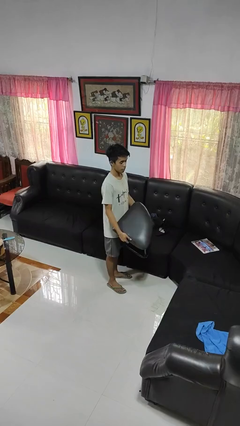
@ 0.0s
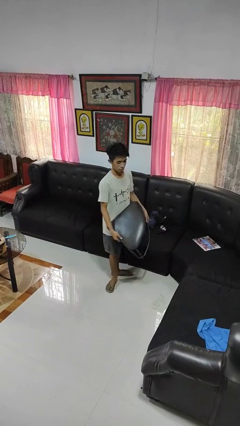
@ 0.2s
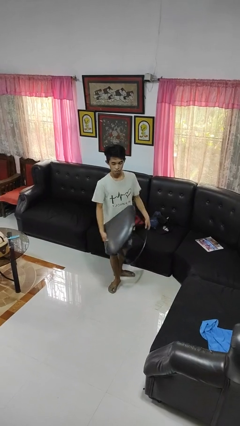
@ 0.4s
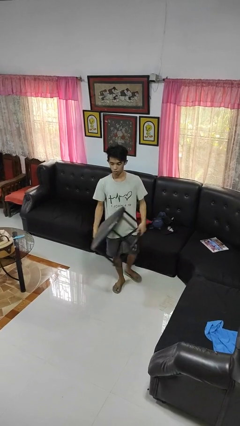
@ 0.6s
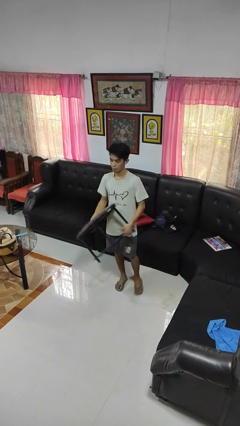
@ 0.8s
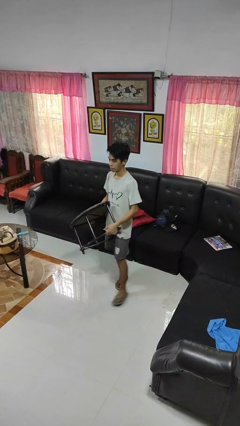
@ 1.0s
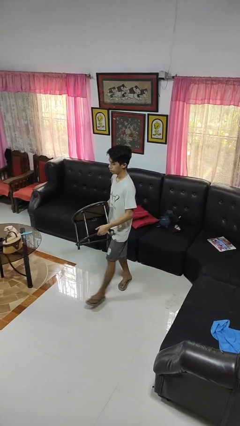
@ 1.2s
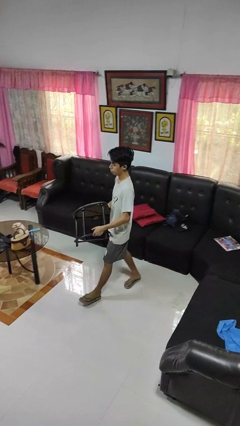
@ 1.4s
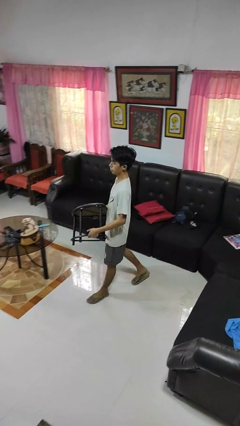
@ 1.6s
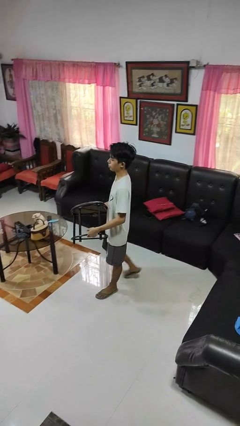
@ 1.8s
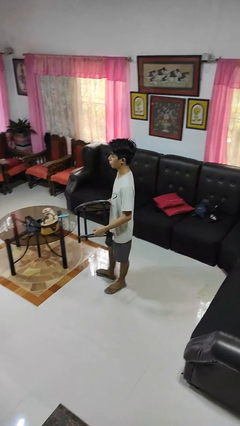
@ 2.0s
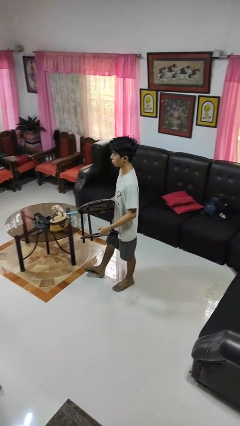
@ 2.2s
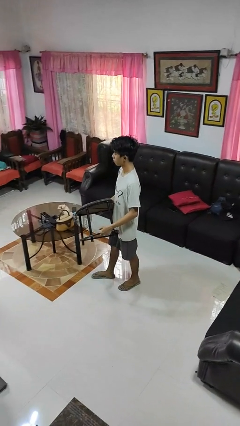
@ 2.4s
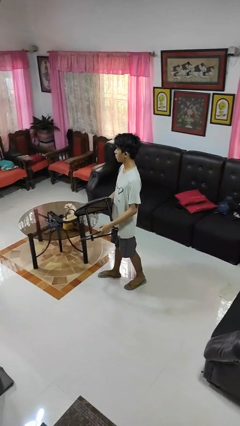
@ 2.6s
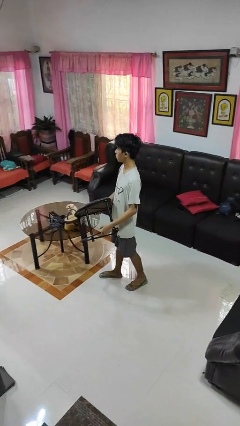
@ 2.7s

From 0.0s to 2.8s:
person carries furniture

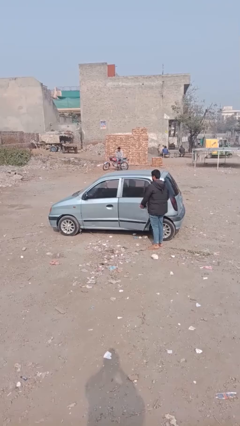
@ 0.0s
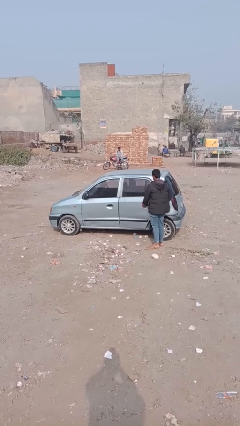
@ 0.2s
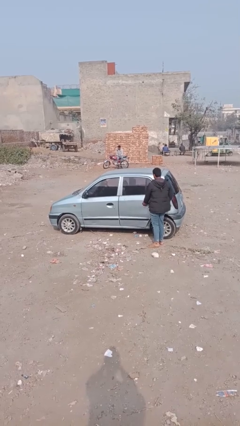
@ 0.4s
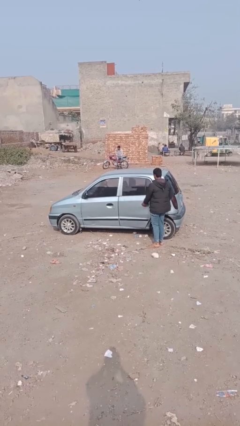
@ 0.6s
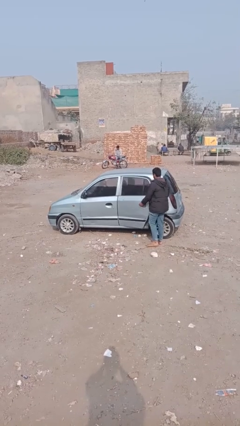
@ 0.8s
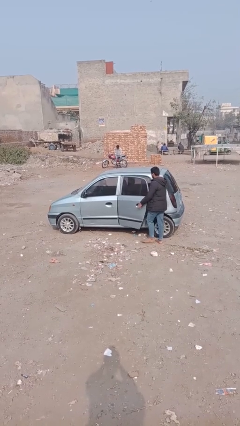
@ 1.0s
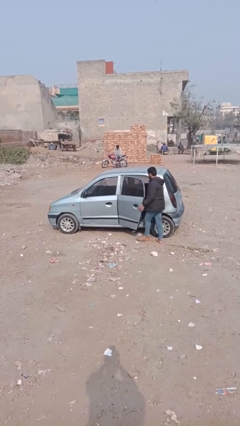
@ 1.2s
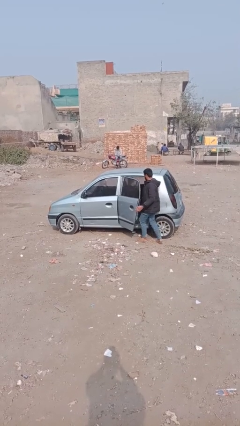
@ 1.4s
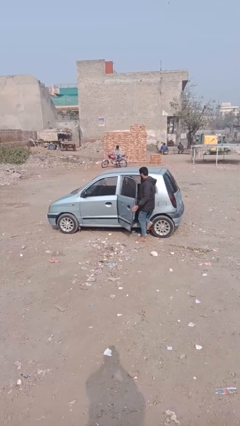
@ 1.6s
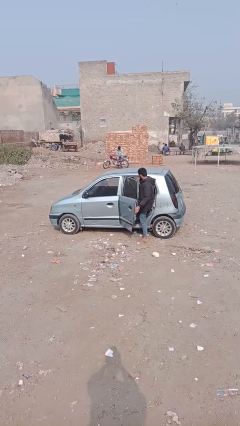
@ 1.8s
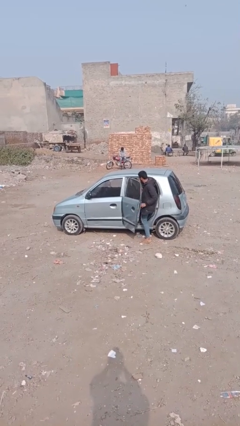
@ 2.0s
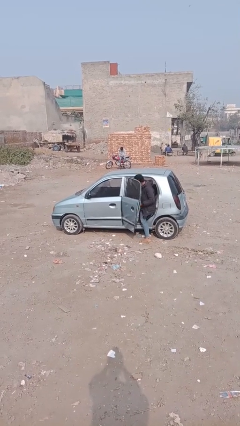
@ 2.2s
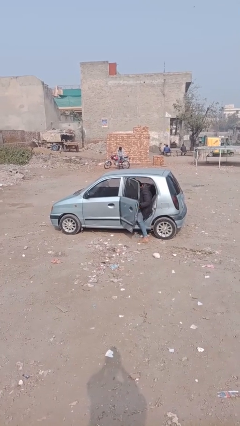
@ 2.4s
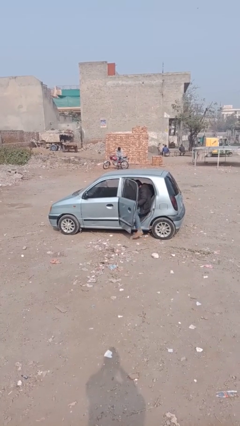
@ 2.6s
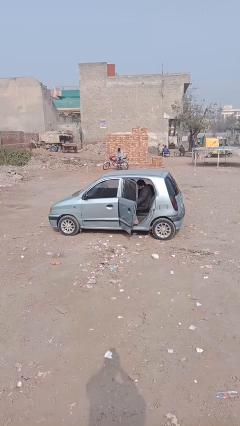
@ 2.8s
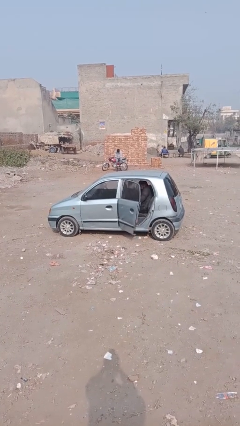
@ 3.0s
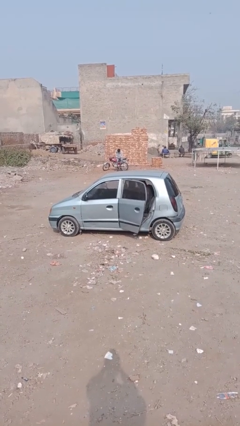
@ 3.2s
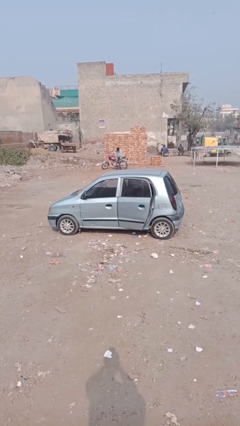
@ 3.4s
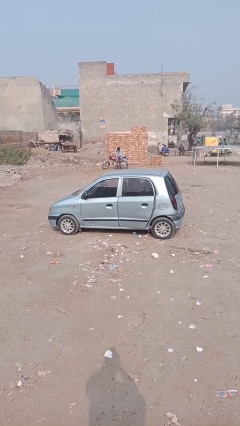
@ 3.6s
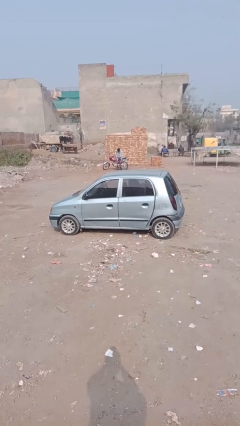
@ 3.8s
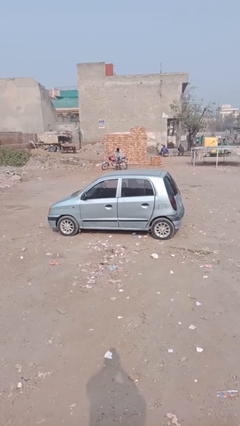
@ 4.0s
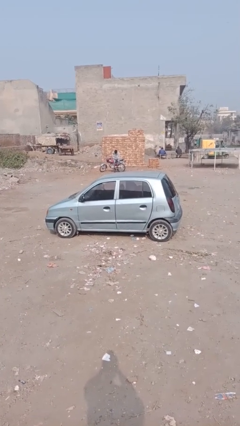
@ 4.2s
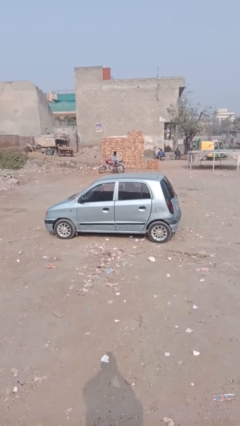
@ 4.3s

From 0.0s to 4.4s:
car picks up person

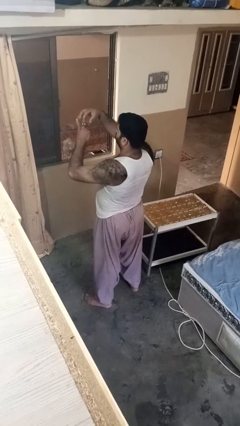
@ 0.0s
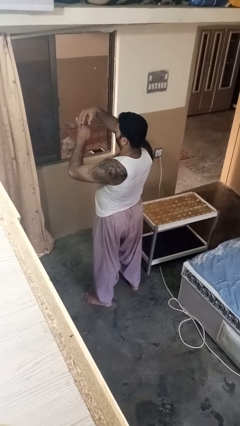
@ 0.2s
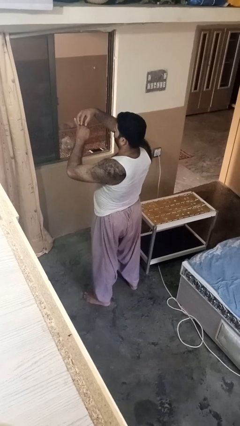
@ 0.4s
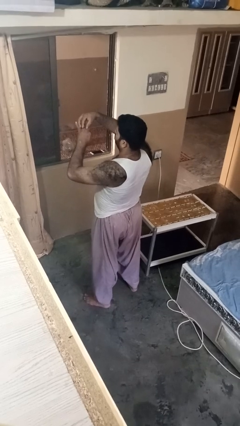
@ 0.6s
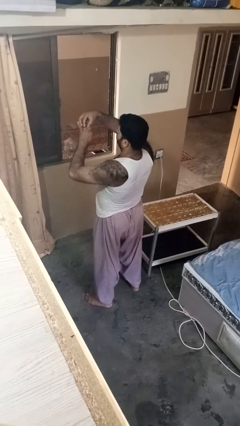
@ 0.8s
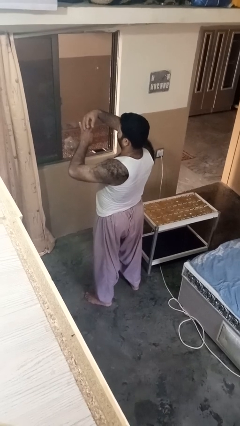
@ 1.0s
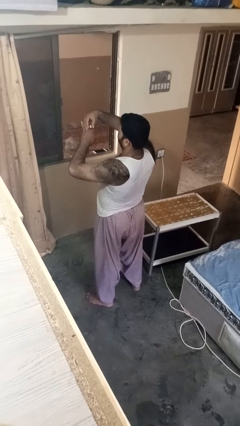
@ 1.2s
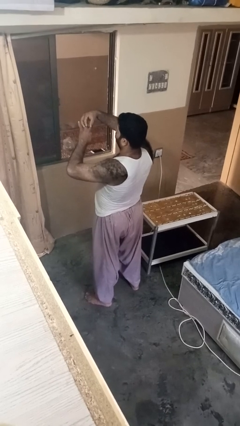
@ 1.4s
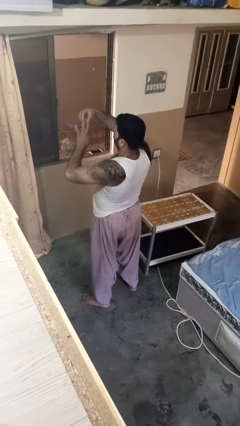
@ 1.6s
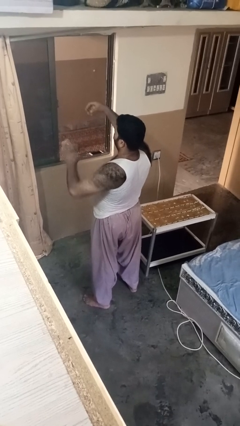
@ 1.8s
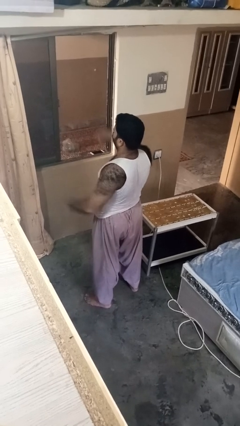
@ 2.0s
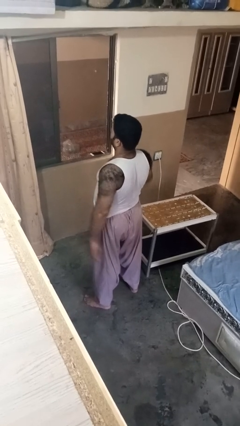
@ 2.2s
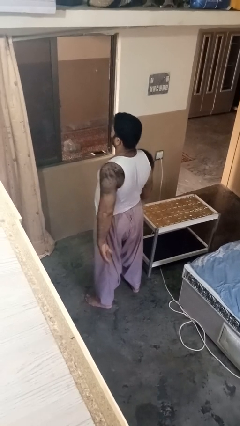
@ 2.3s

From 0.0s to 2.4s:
person takes off ring

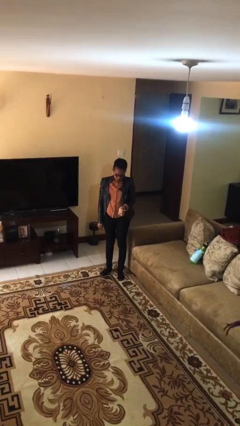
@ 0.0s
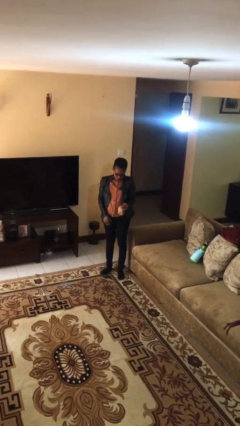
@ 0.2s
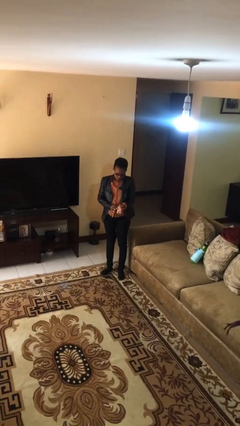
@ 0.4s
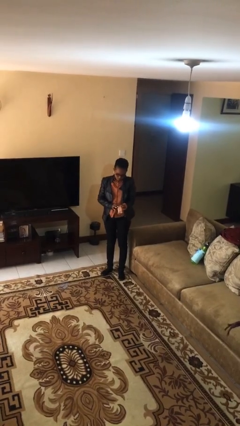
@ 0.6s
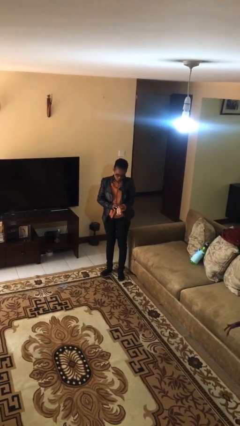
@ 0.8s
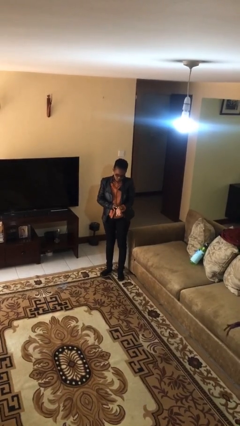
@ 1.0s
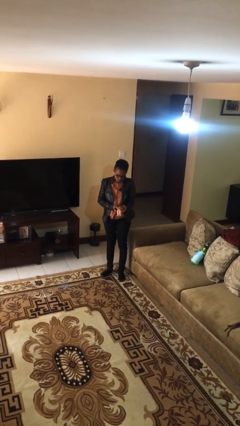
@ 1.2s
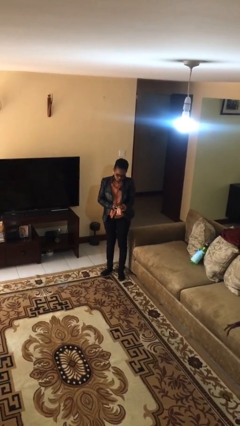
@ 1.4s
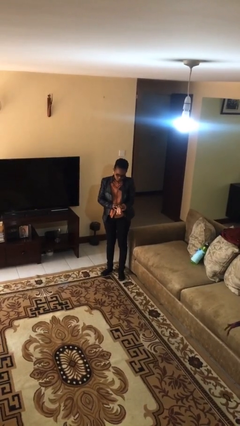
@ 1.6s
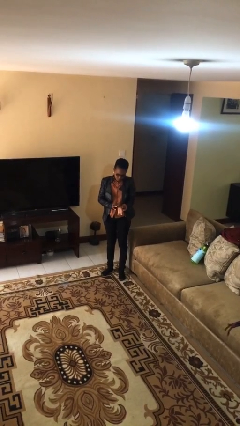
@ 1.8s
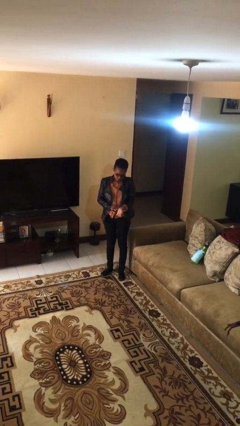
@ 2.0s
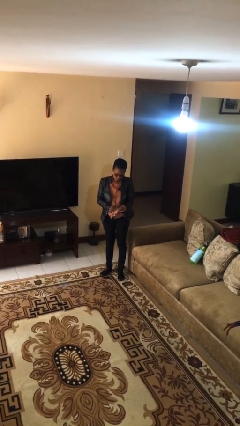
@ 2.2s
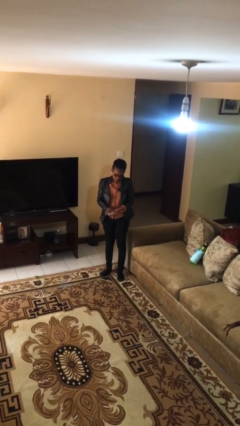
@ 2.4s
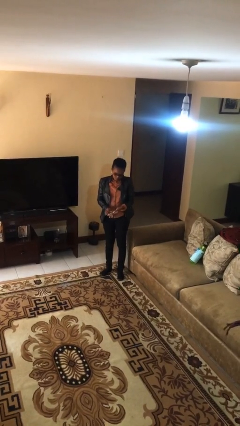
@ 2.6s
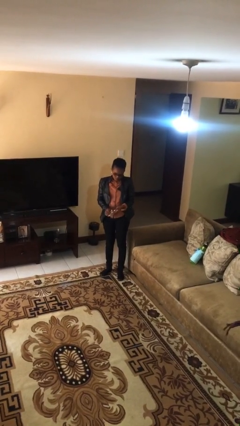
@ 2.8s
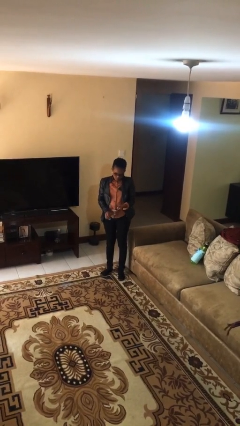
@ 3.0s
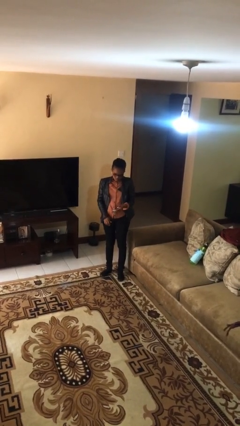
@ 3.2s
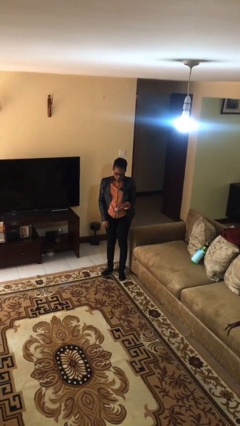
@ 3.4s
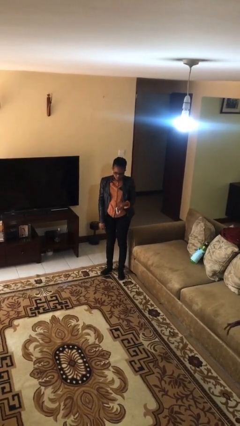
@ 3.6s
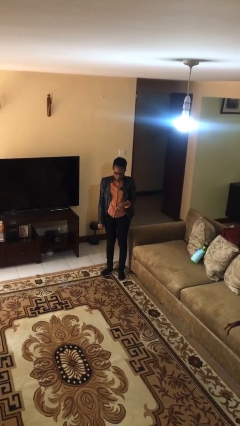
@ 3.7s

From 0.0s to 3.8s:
person takes off wristwatch

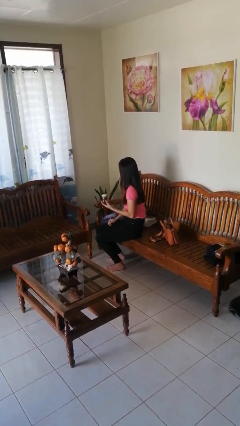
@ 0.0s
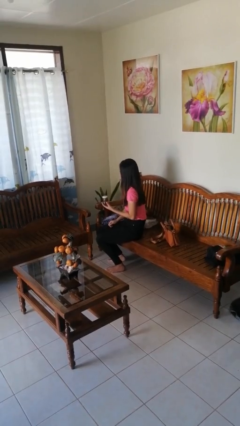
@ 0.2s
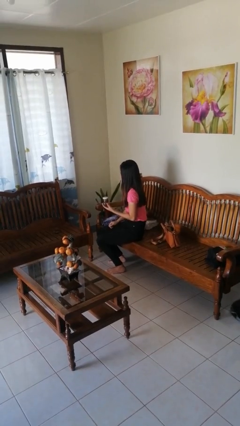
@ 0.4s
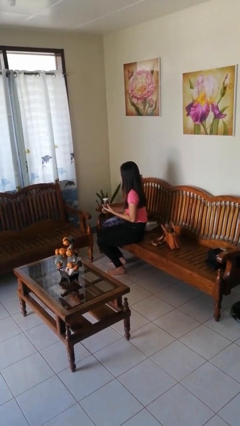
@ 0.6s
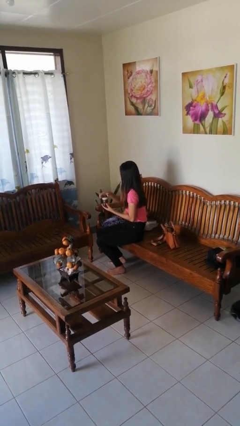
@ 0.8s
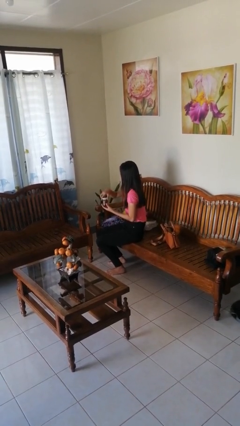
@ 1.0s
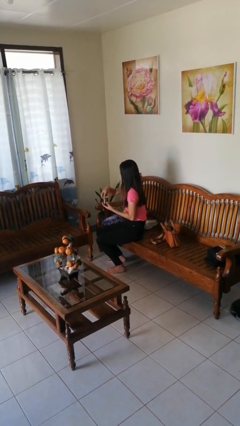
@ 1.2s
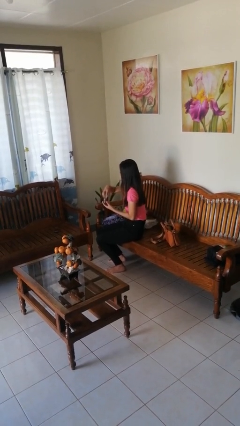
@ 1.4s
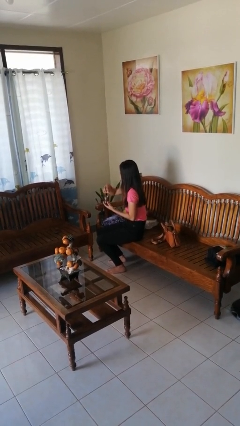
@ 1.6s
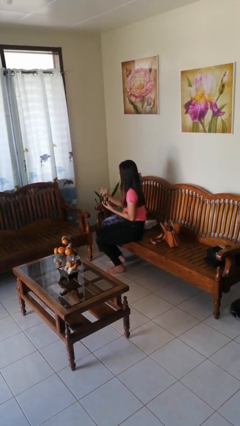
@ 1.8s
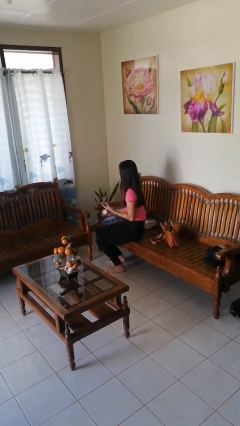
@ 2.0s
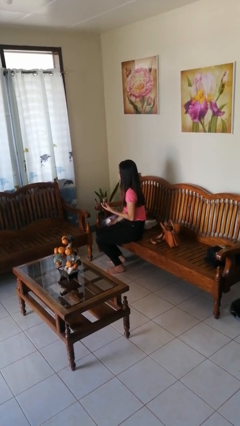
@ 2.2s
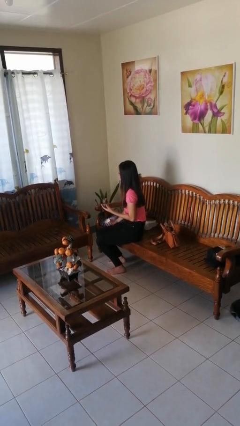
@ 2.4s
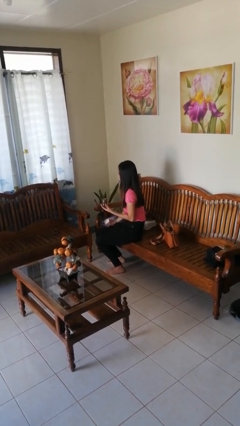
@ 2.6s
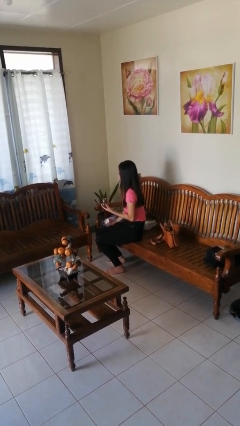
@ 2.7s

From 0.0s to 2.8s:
person opens jar

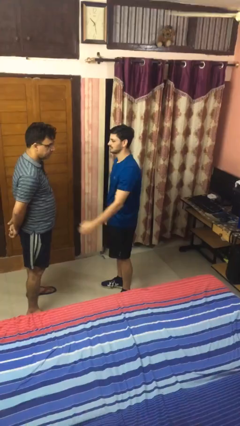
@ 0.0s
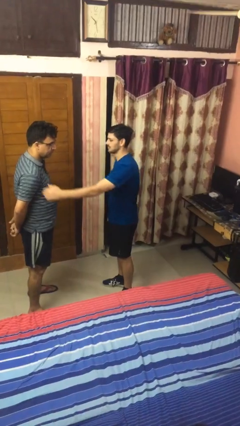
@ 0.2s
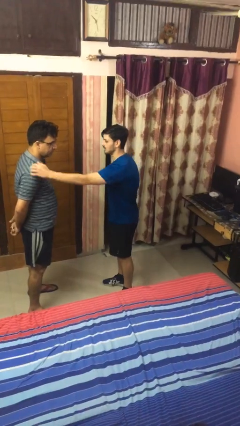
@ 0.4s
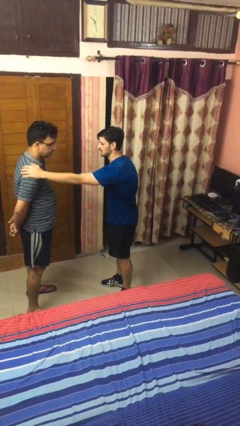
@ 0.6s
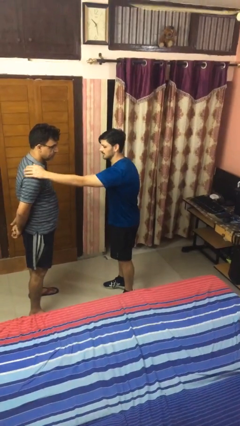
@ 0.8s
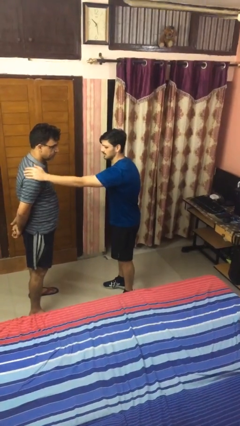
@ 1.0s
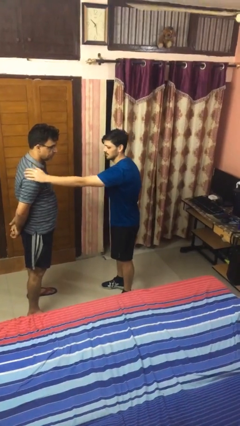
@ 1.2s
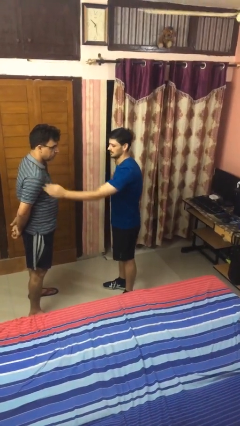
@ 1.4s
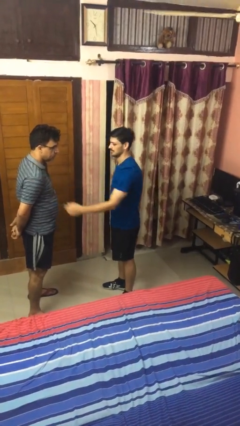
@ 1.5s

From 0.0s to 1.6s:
person pounds shoulders of person
